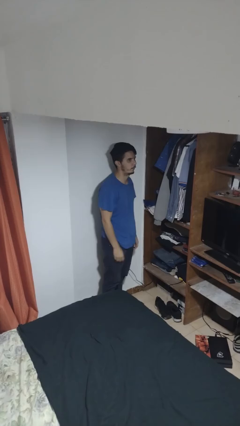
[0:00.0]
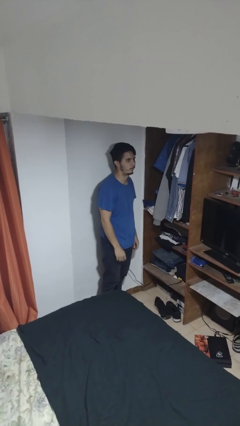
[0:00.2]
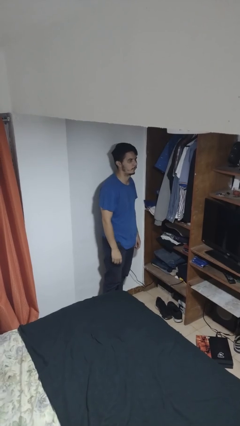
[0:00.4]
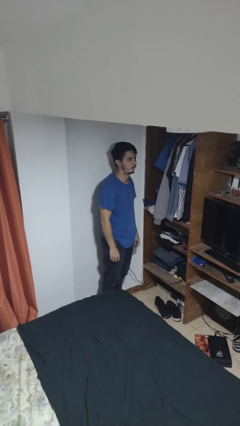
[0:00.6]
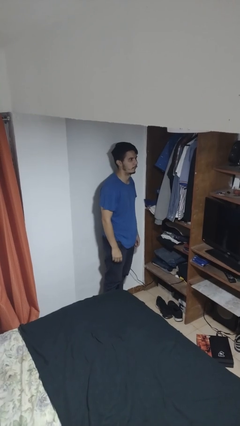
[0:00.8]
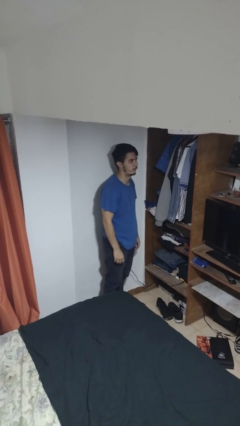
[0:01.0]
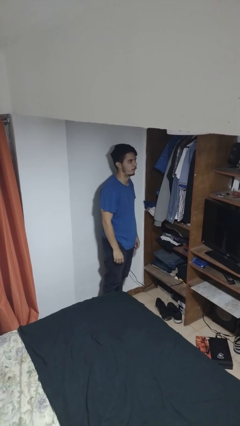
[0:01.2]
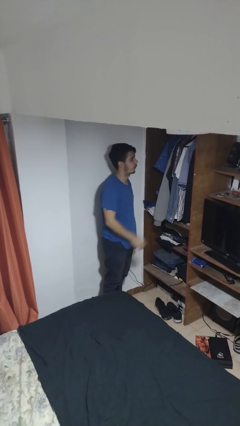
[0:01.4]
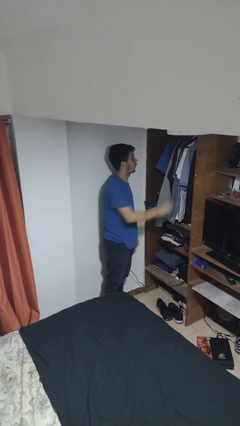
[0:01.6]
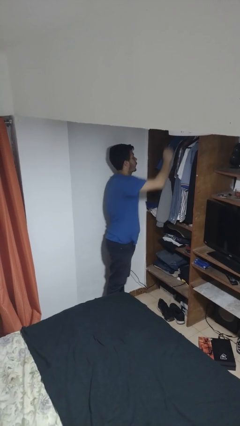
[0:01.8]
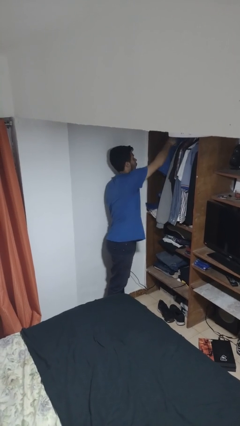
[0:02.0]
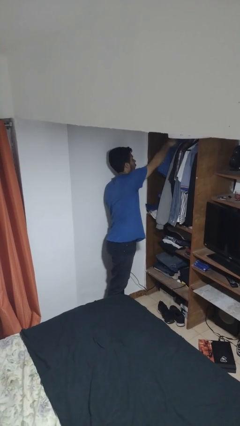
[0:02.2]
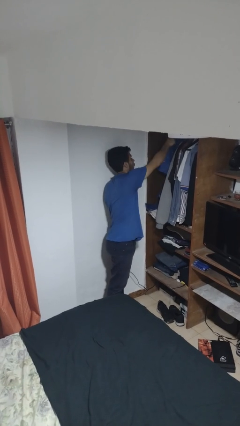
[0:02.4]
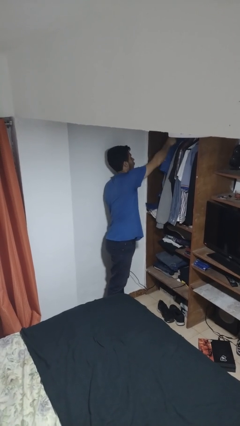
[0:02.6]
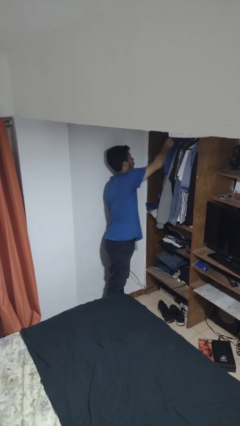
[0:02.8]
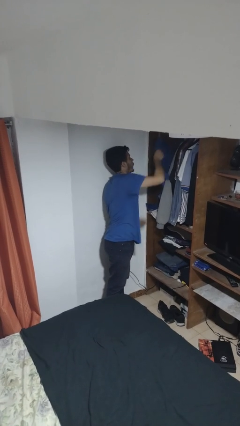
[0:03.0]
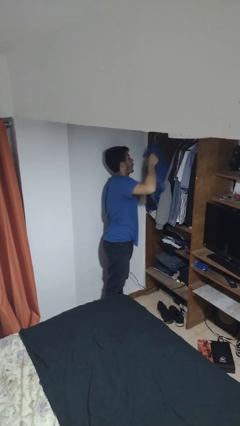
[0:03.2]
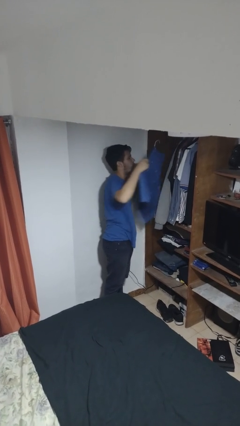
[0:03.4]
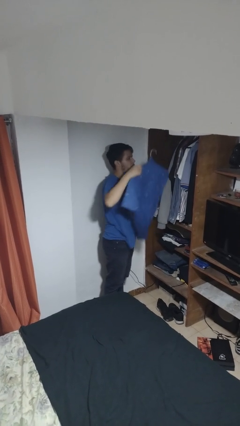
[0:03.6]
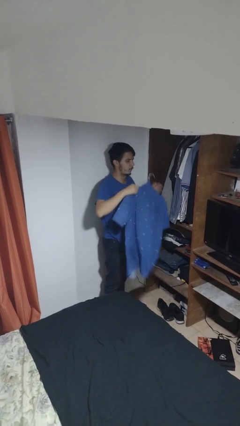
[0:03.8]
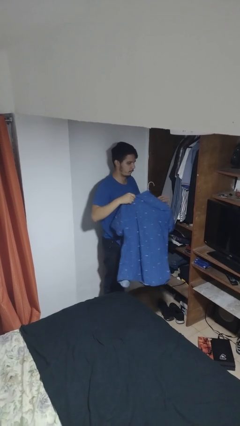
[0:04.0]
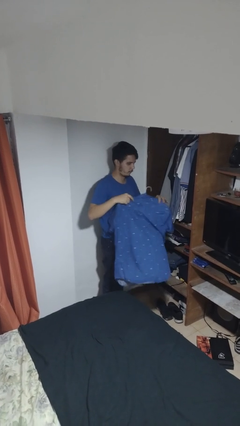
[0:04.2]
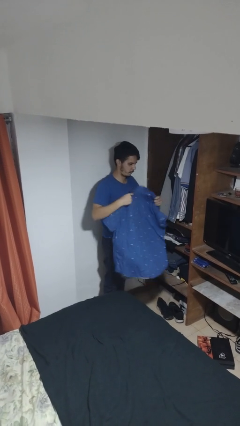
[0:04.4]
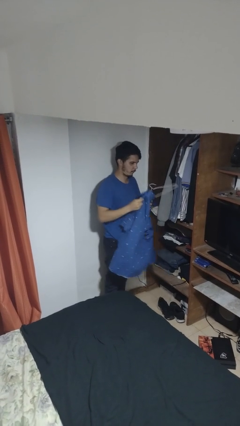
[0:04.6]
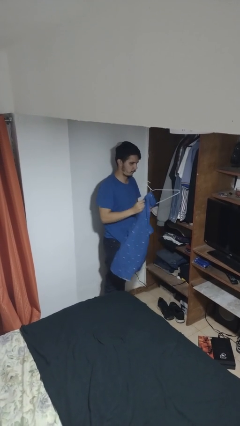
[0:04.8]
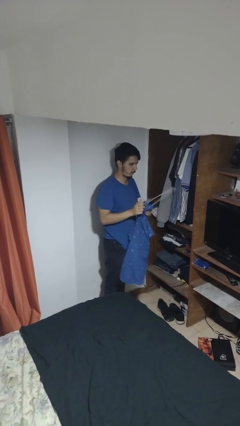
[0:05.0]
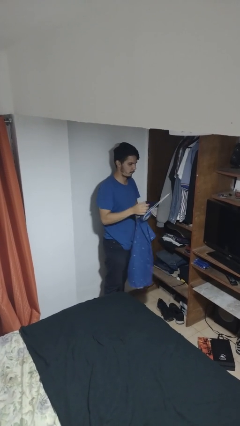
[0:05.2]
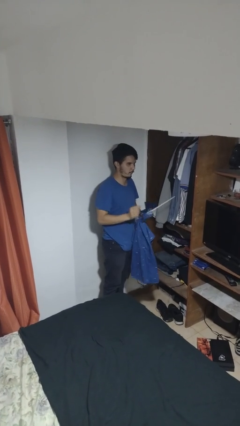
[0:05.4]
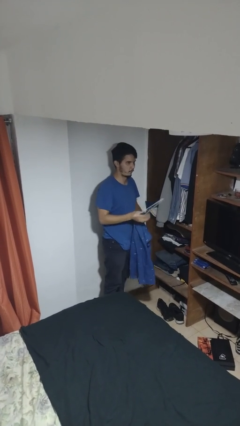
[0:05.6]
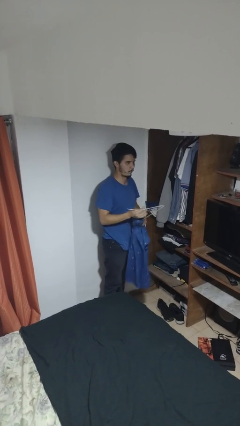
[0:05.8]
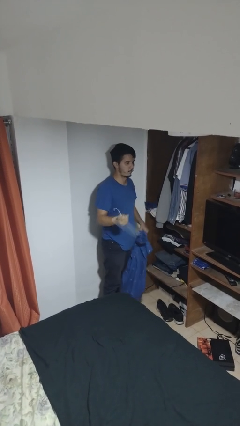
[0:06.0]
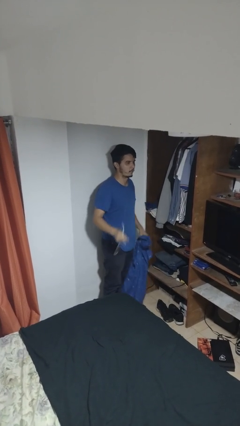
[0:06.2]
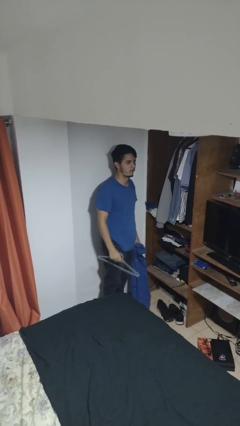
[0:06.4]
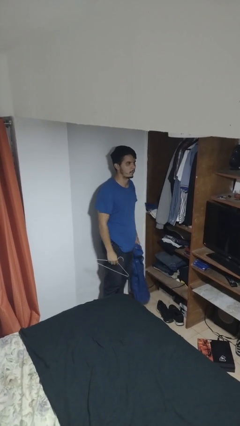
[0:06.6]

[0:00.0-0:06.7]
person takes clothes from closet

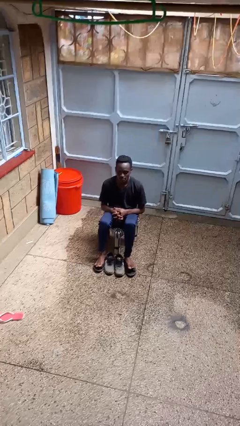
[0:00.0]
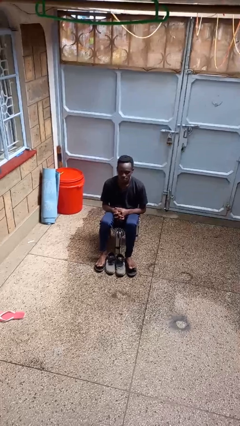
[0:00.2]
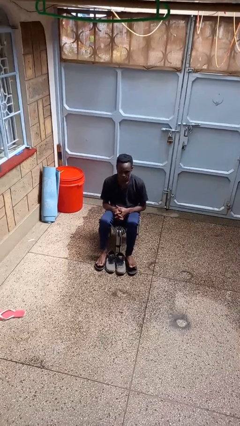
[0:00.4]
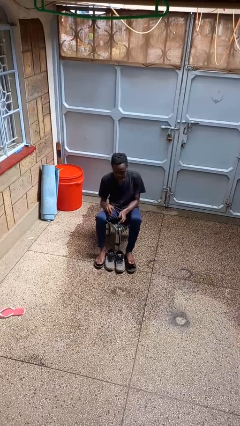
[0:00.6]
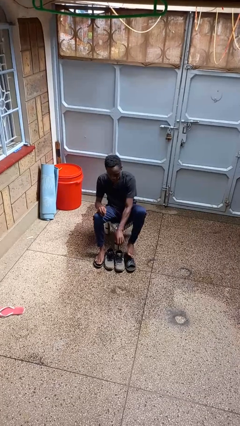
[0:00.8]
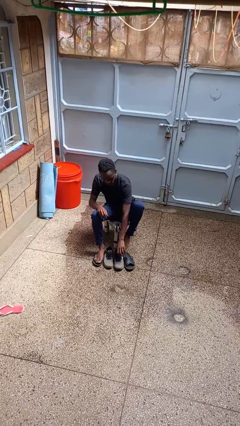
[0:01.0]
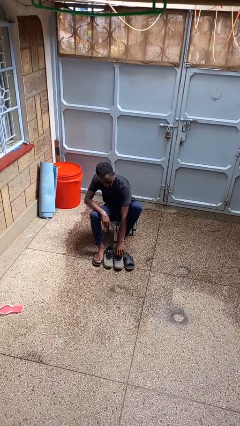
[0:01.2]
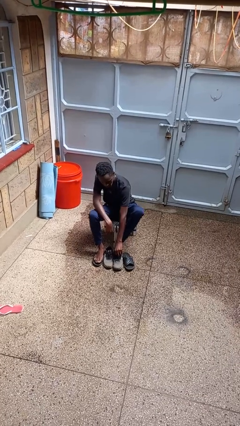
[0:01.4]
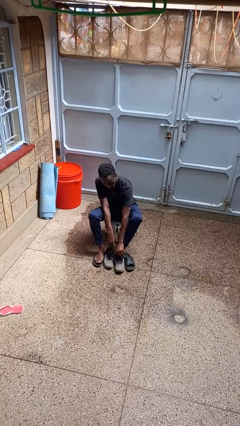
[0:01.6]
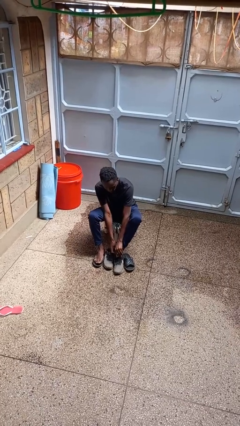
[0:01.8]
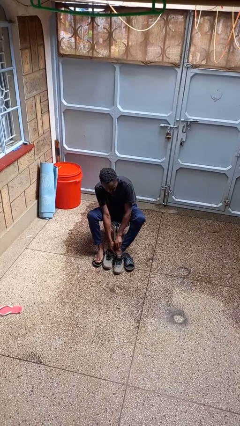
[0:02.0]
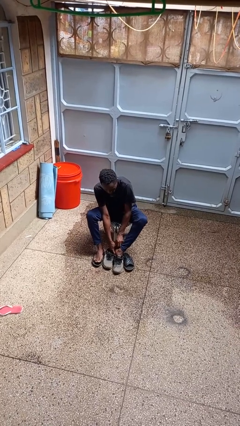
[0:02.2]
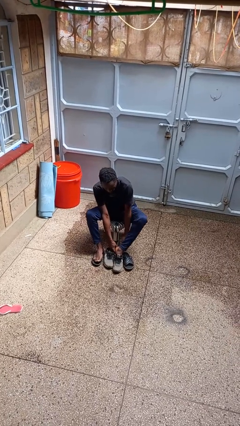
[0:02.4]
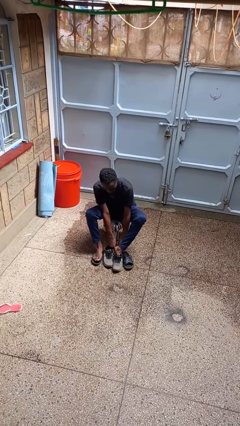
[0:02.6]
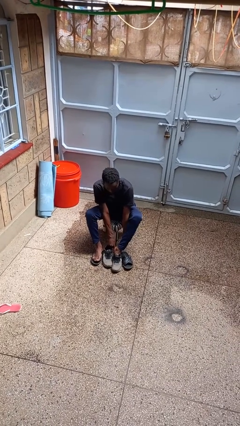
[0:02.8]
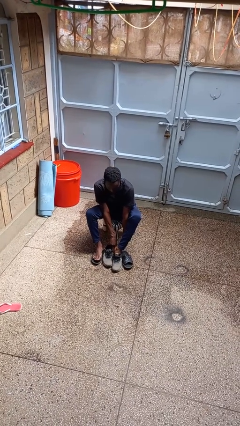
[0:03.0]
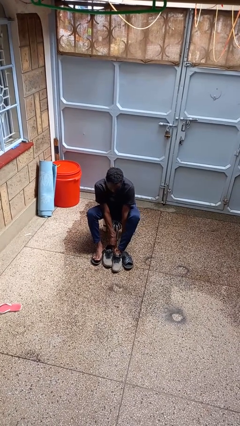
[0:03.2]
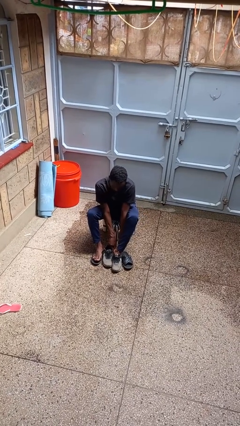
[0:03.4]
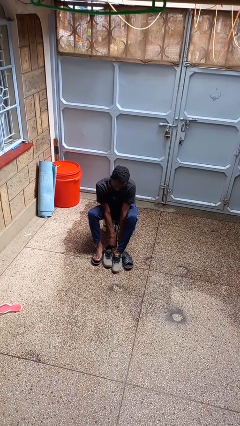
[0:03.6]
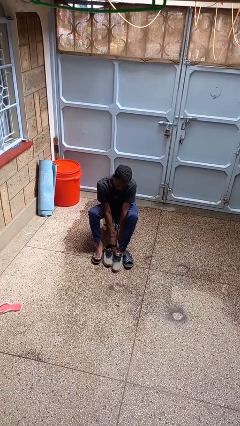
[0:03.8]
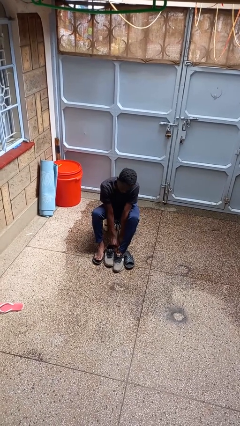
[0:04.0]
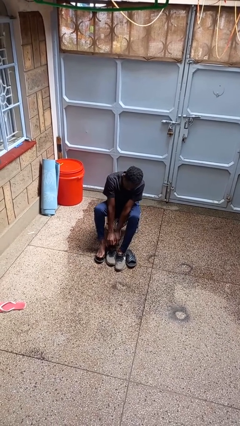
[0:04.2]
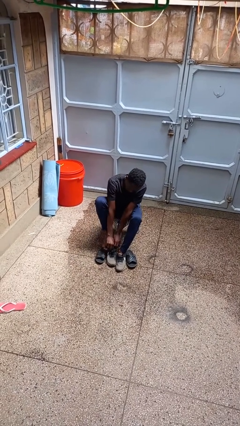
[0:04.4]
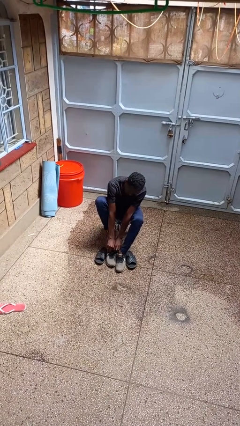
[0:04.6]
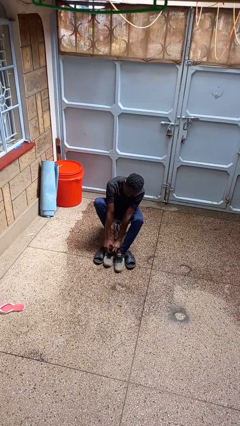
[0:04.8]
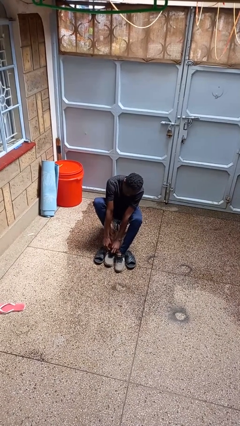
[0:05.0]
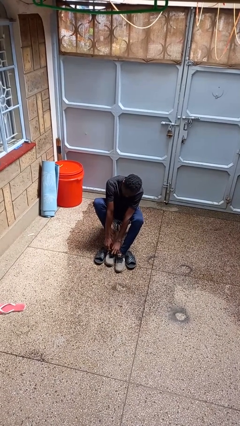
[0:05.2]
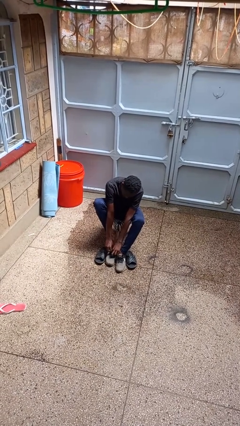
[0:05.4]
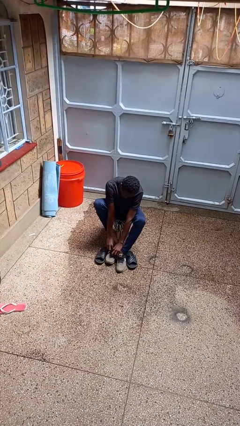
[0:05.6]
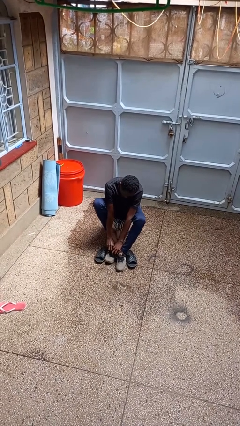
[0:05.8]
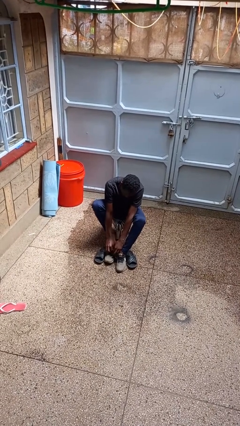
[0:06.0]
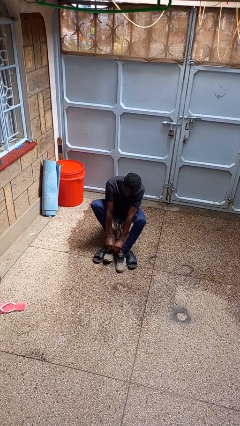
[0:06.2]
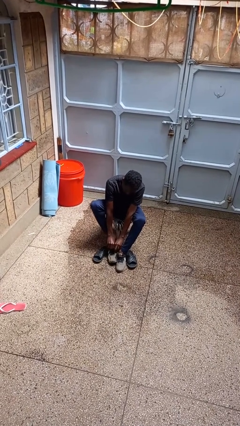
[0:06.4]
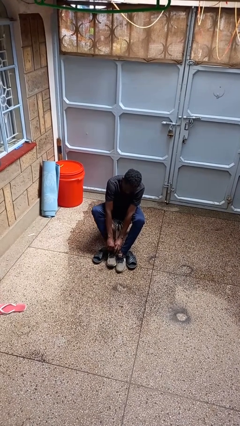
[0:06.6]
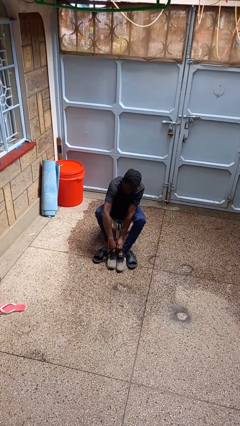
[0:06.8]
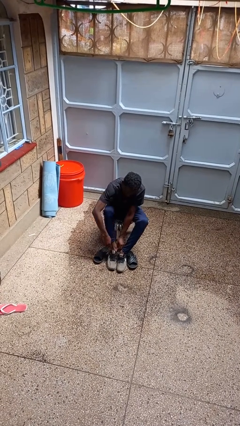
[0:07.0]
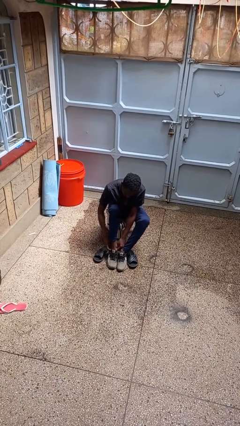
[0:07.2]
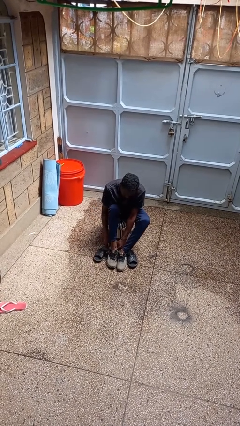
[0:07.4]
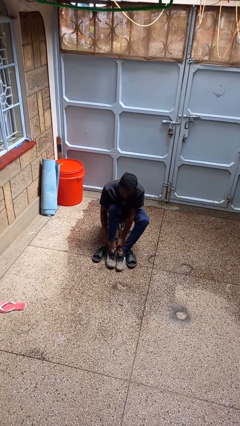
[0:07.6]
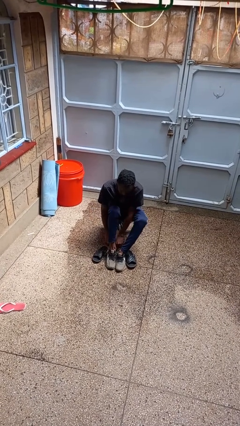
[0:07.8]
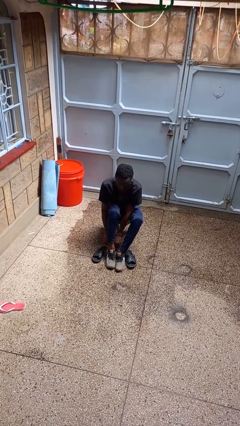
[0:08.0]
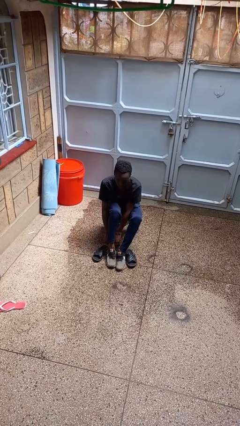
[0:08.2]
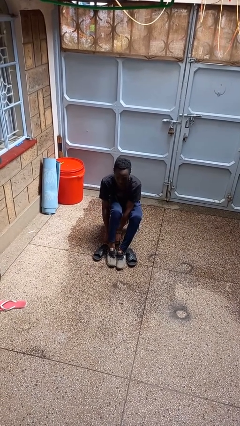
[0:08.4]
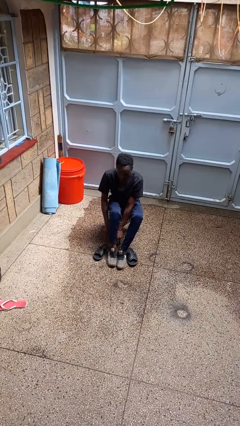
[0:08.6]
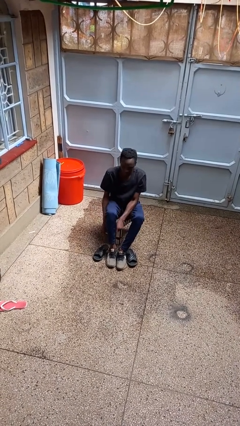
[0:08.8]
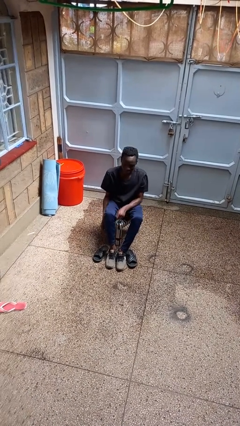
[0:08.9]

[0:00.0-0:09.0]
person puts on shoes

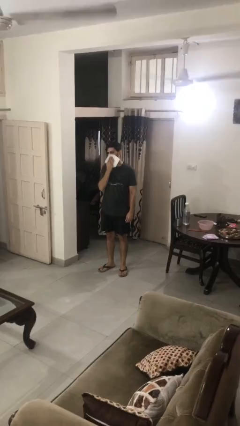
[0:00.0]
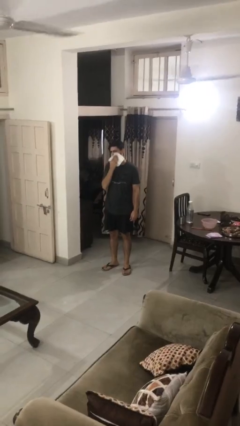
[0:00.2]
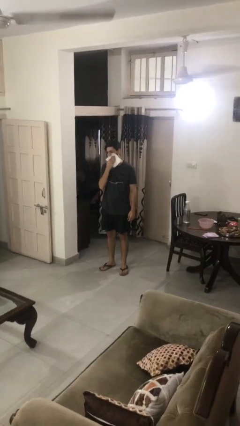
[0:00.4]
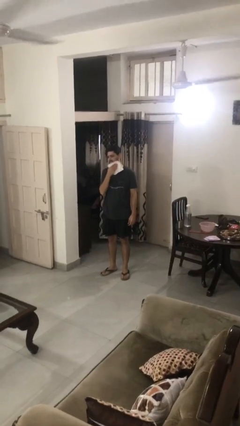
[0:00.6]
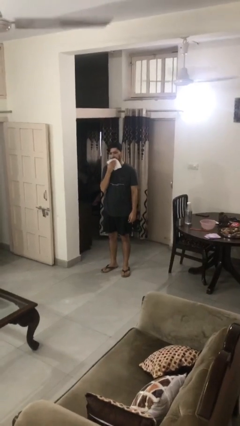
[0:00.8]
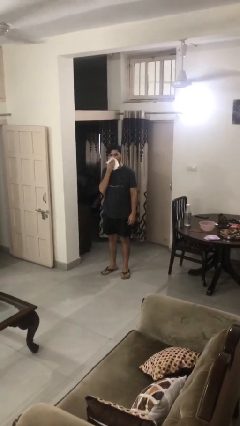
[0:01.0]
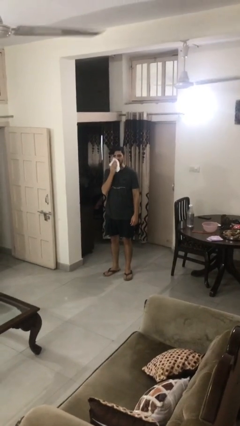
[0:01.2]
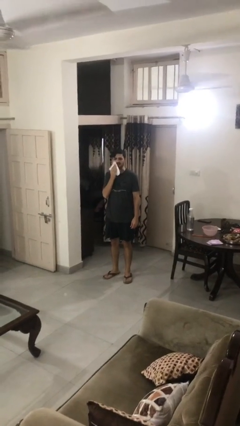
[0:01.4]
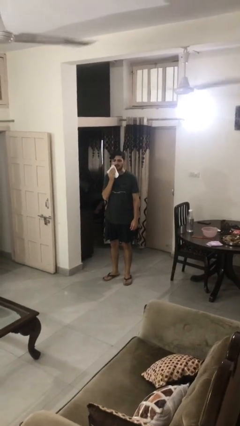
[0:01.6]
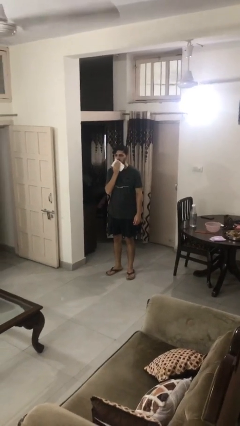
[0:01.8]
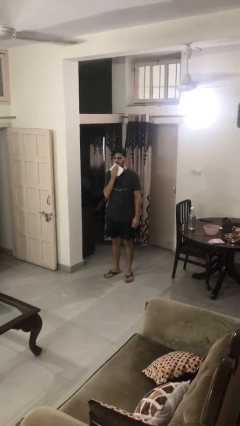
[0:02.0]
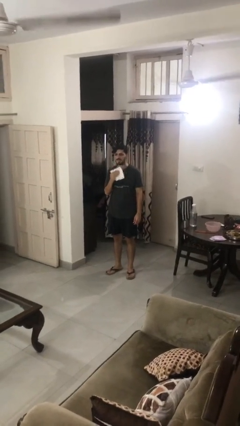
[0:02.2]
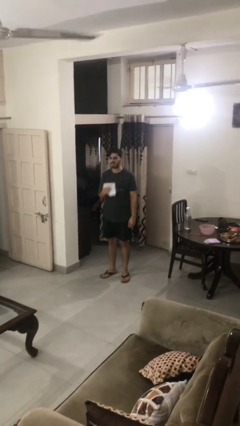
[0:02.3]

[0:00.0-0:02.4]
person wipes mouth with napkin
